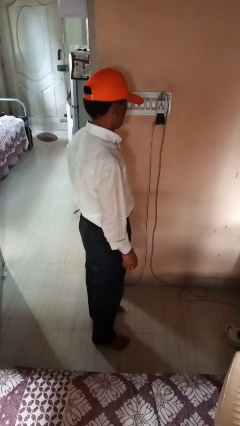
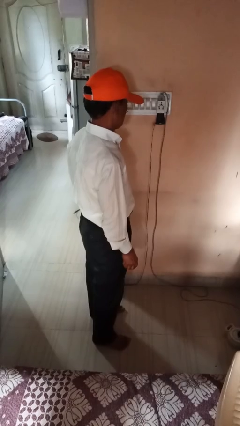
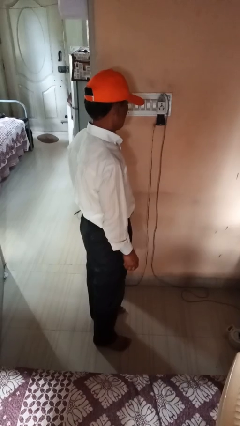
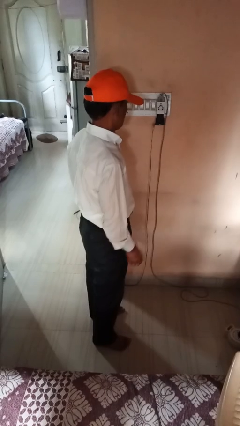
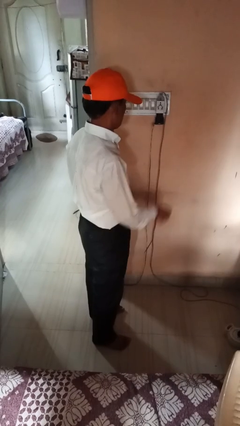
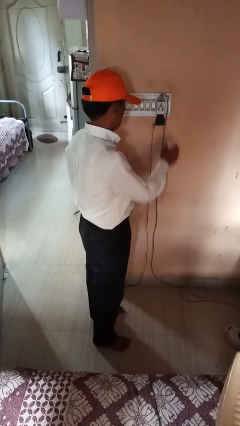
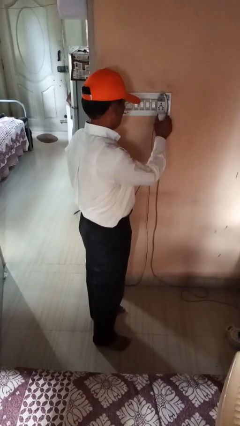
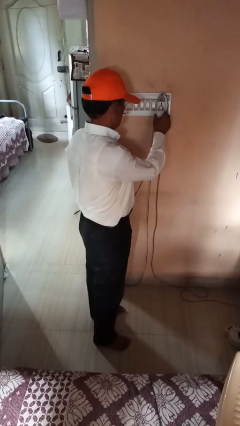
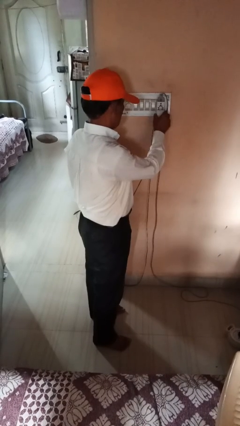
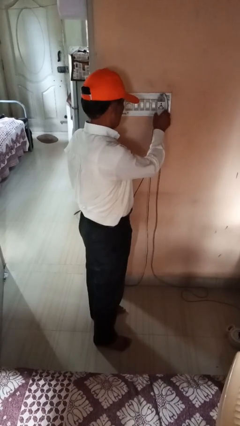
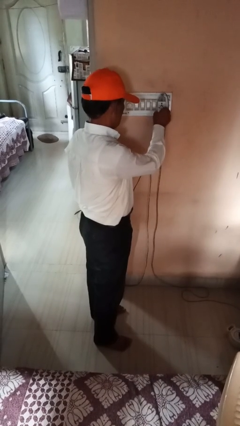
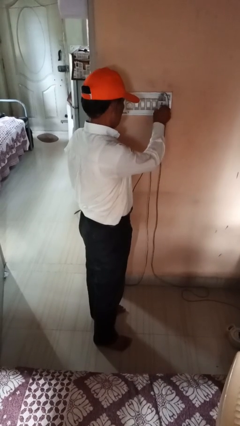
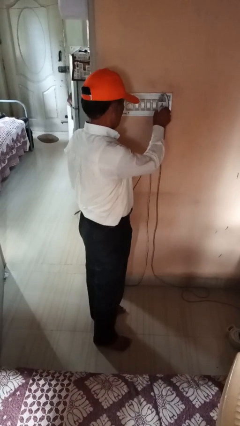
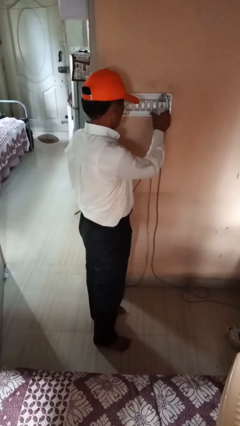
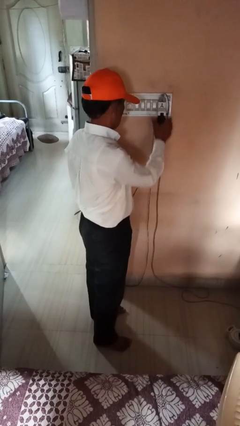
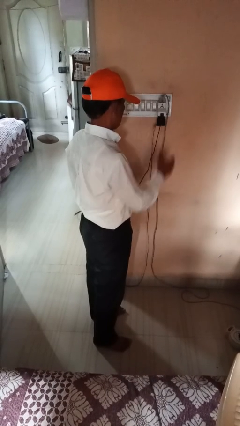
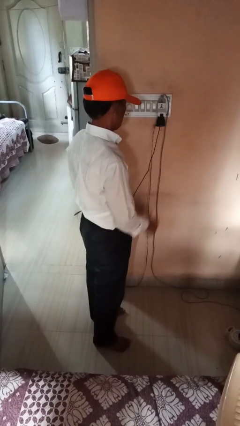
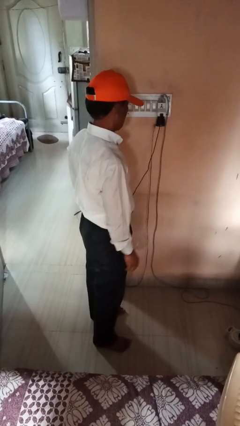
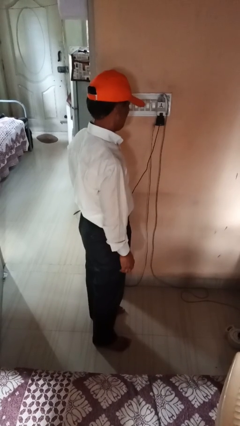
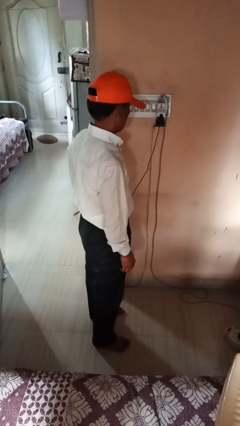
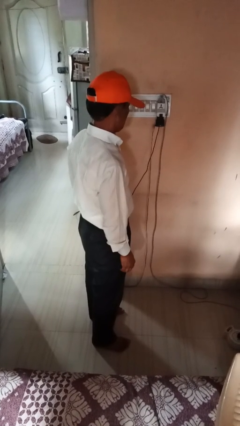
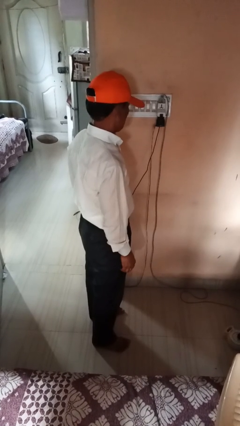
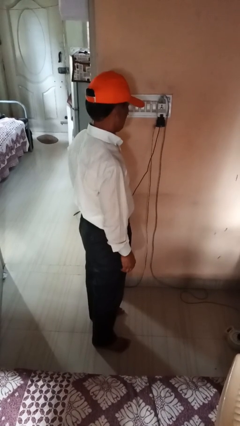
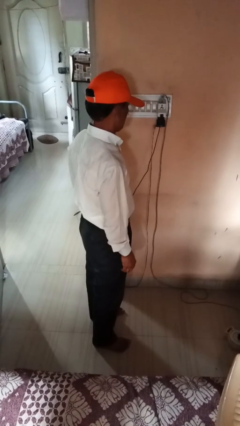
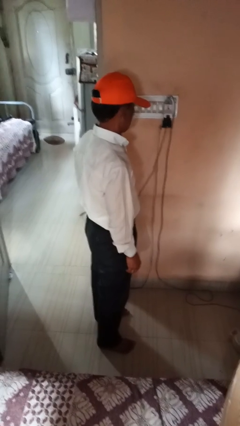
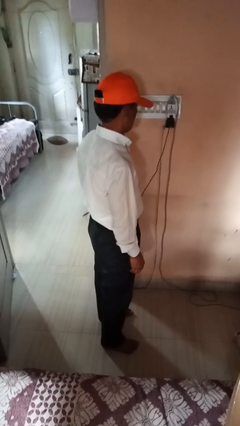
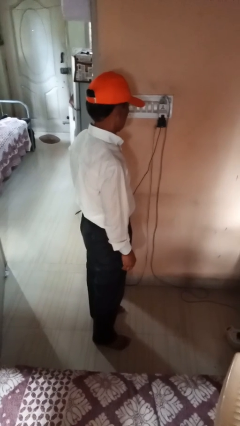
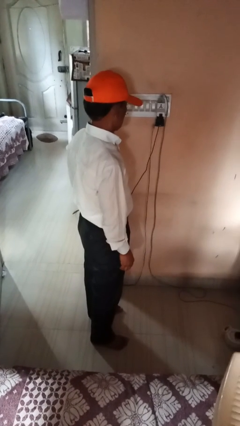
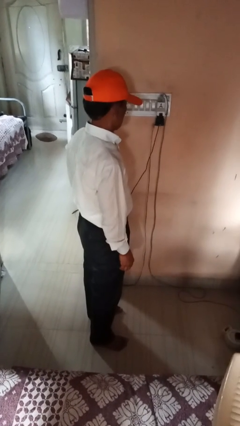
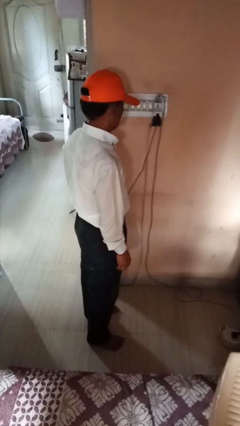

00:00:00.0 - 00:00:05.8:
person plugs into electrical socket

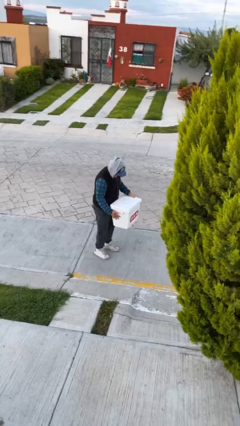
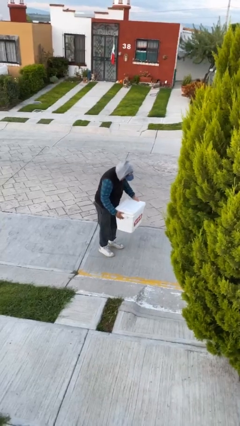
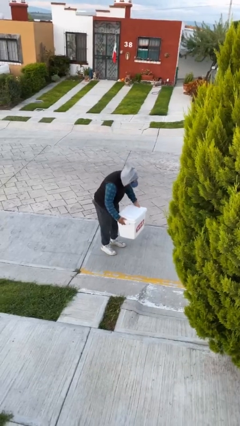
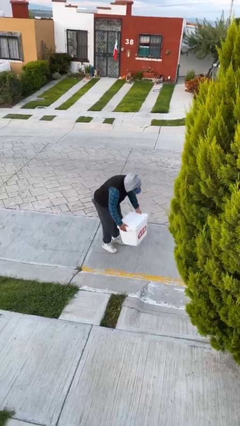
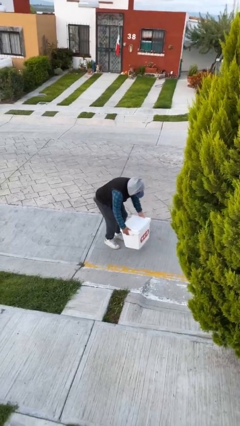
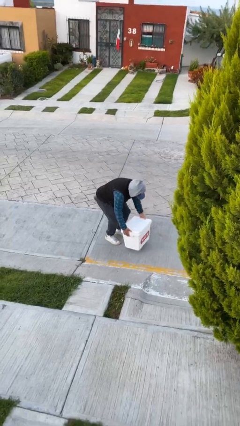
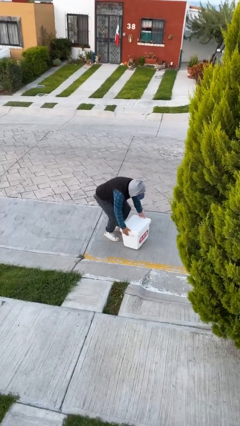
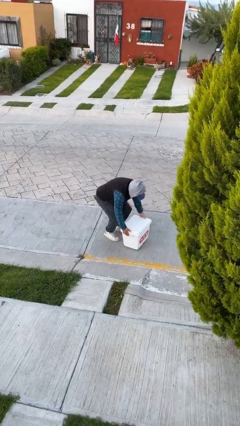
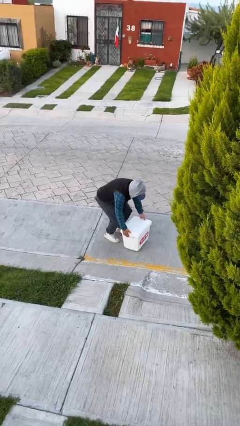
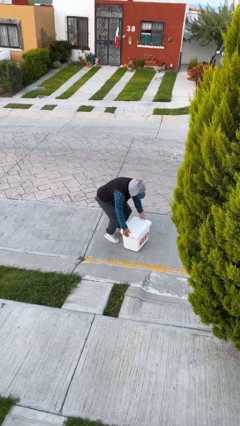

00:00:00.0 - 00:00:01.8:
person puts down object on floor

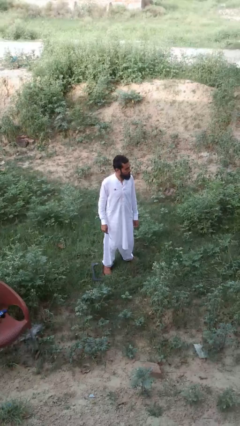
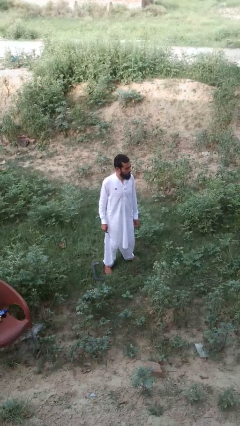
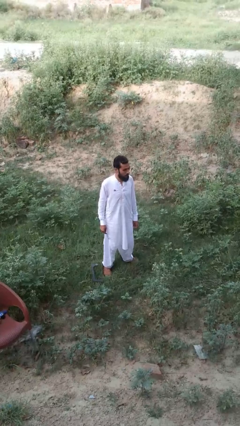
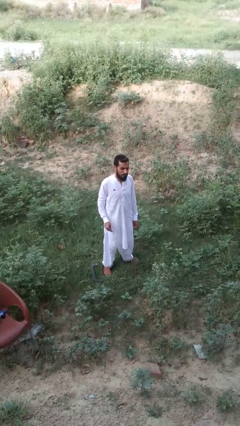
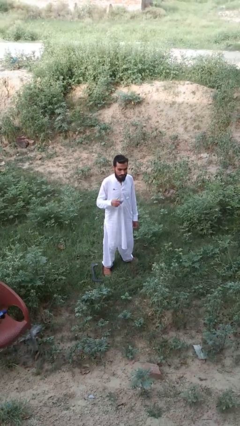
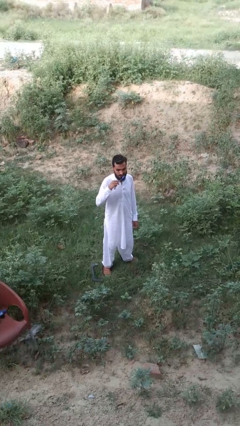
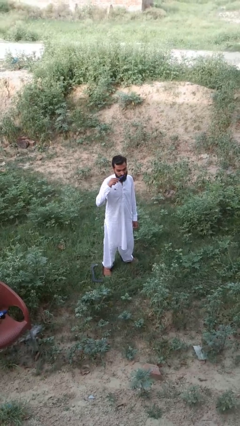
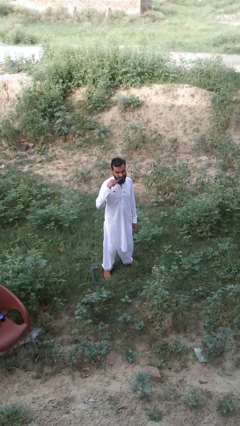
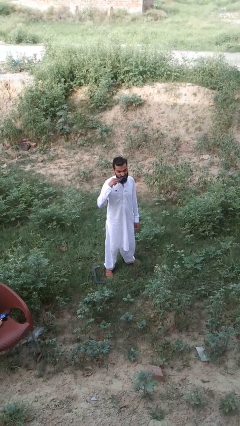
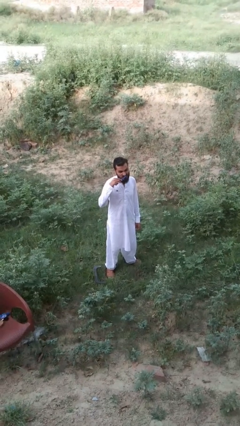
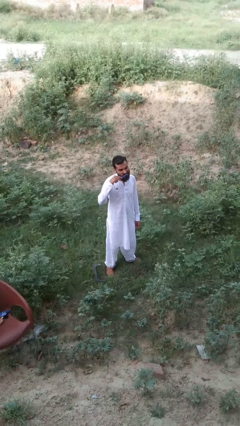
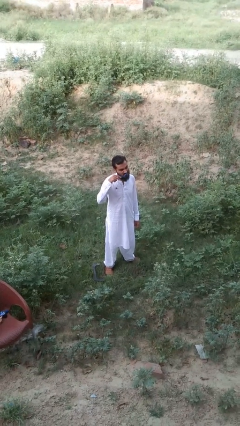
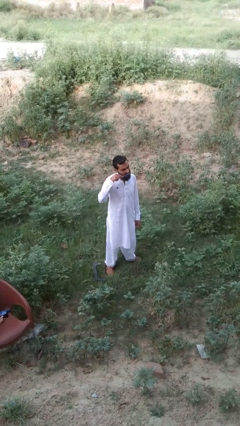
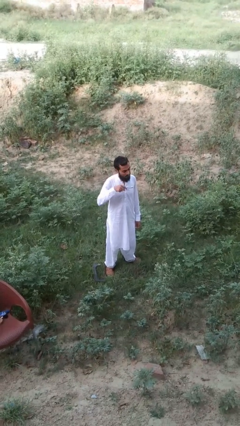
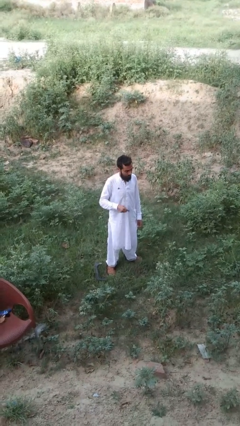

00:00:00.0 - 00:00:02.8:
person brushes teeth

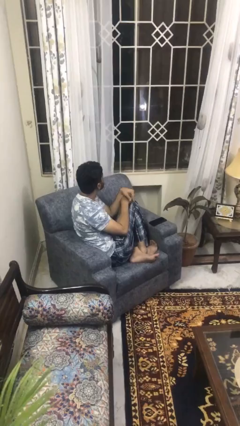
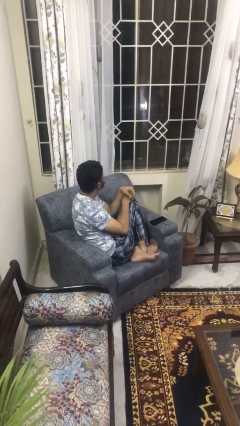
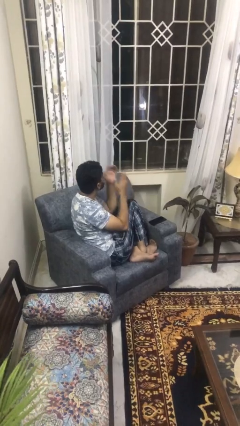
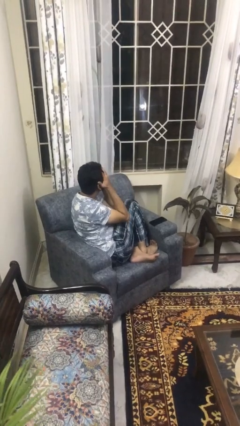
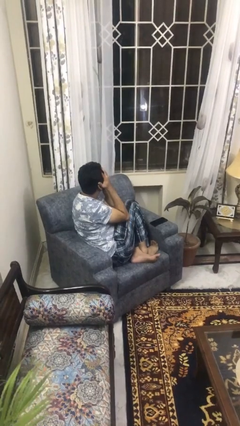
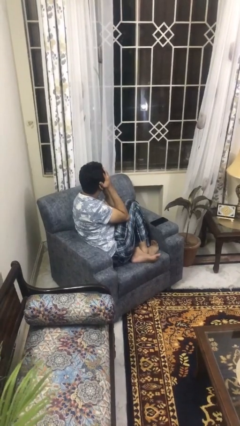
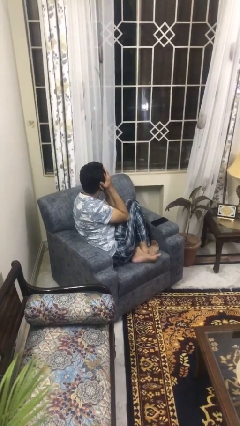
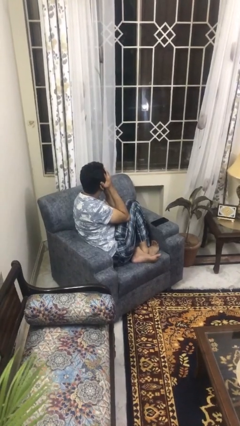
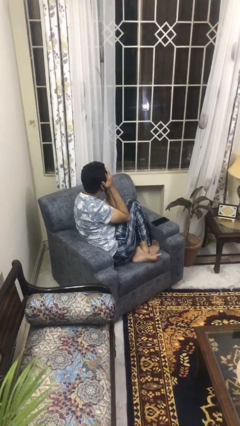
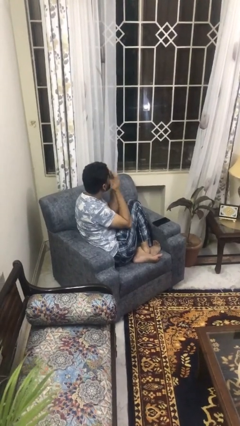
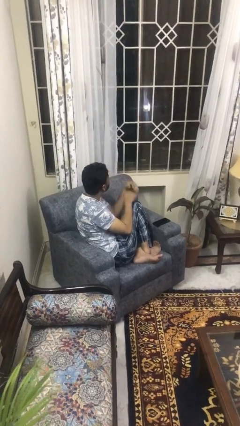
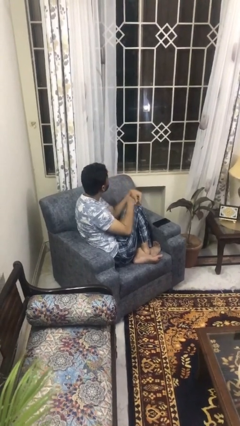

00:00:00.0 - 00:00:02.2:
person covers face with hands

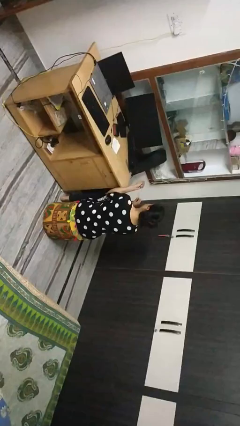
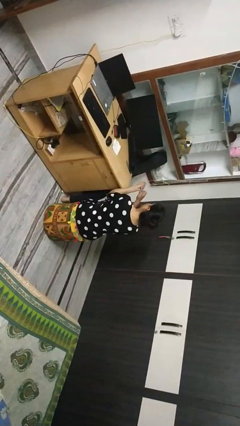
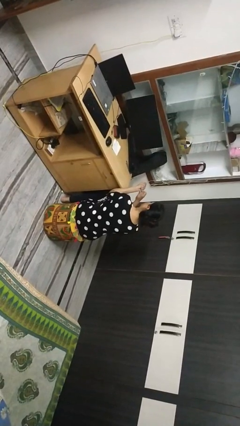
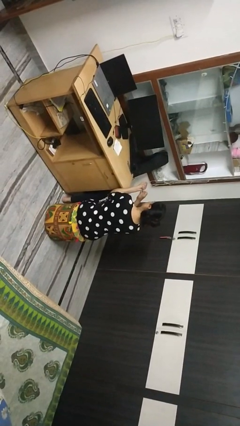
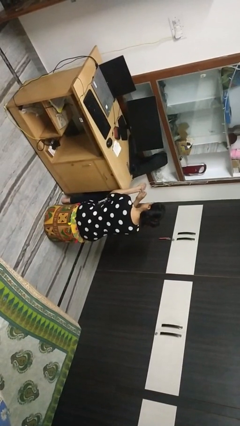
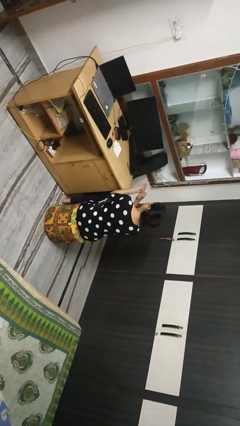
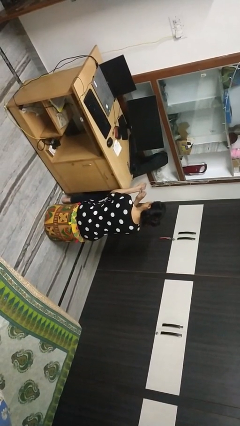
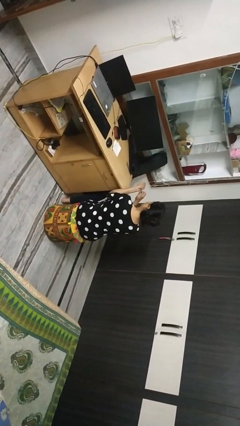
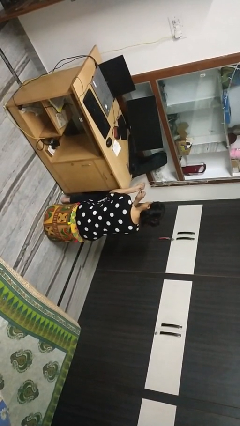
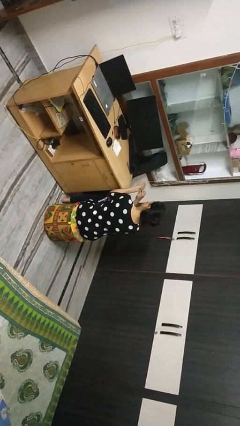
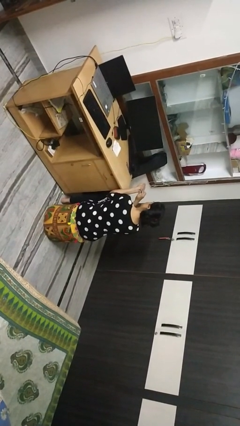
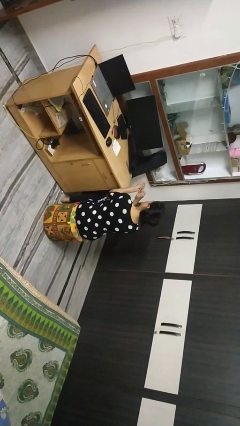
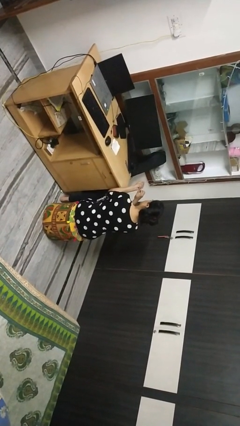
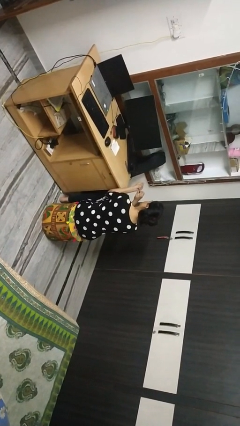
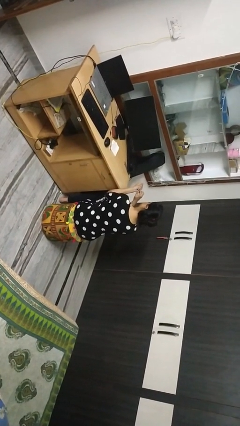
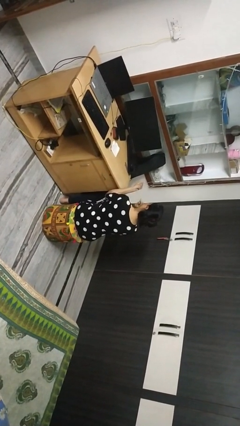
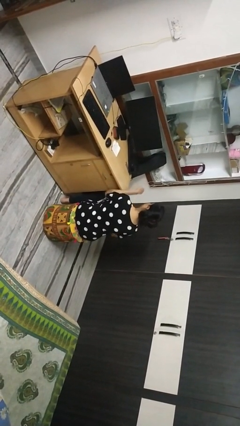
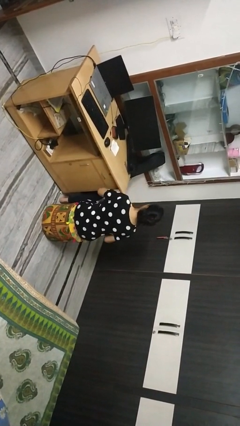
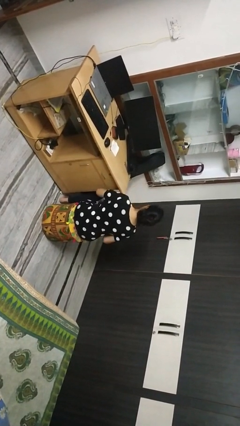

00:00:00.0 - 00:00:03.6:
person files fingernails

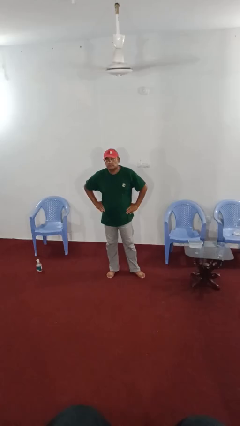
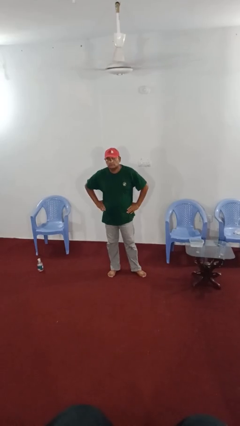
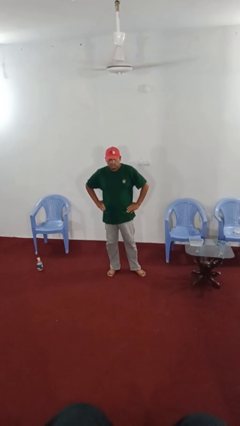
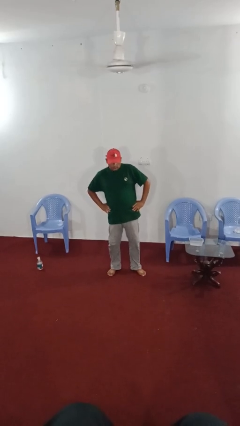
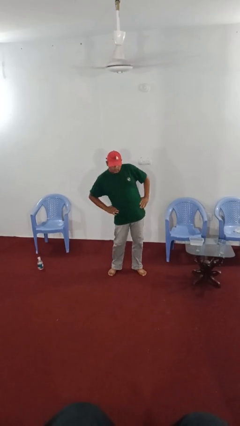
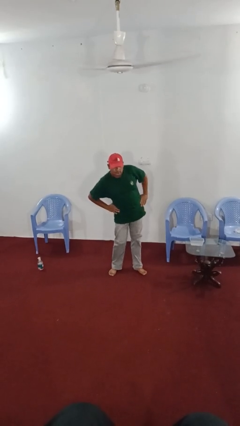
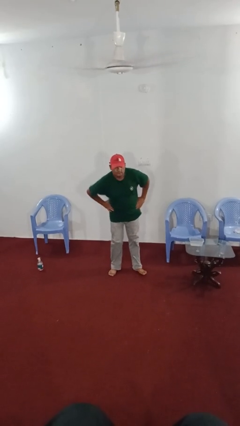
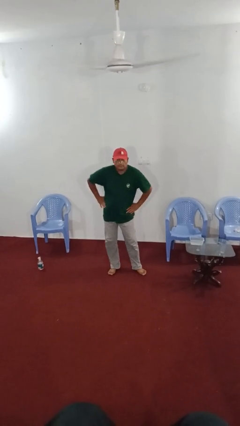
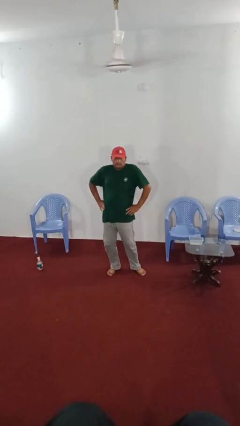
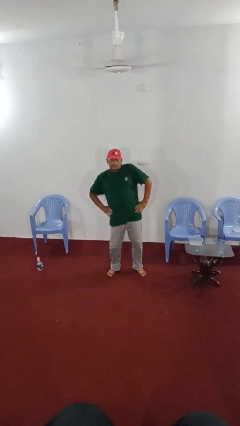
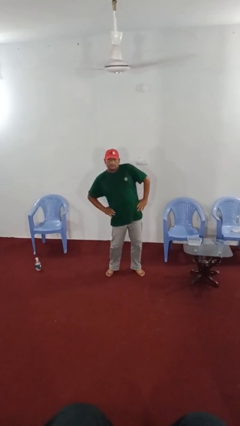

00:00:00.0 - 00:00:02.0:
person wiggles hips
